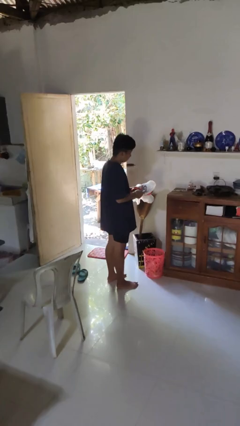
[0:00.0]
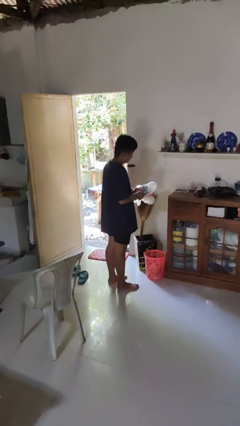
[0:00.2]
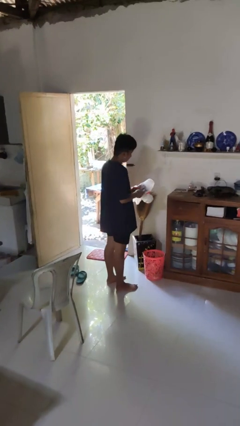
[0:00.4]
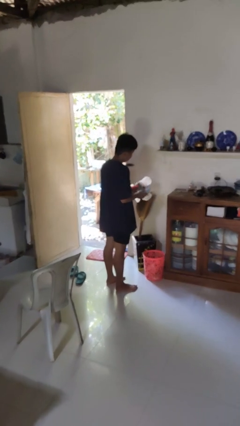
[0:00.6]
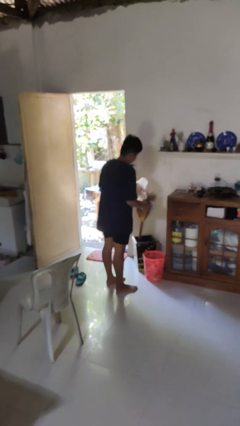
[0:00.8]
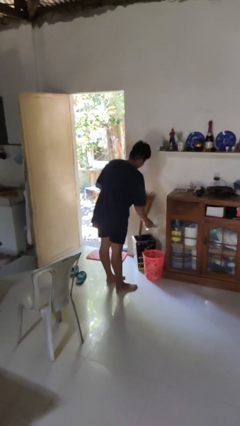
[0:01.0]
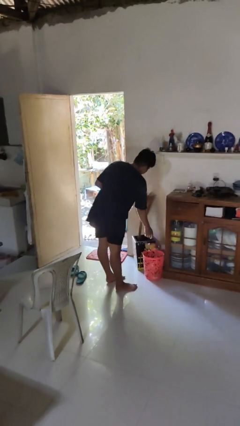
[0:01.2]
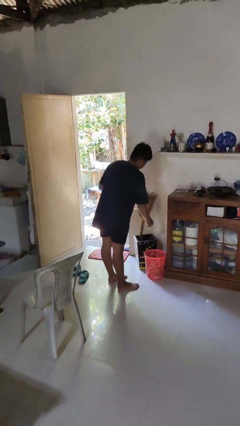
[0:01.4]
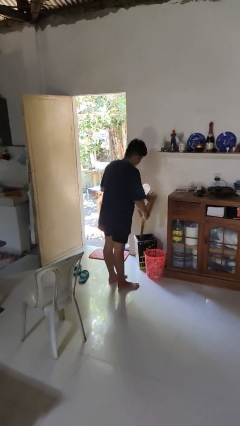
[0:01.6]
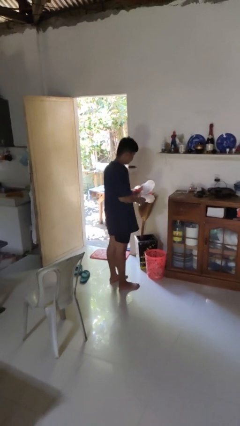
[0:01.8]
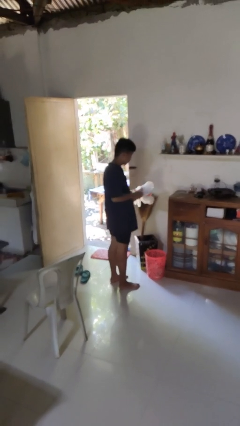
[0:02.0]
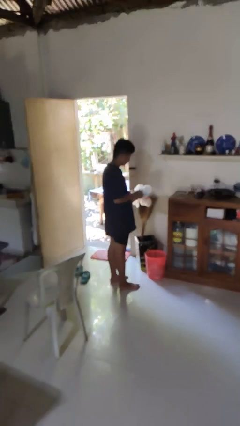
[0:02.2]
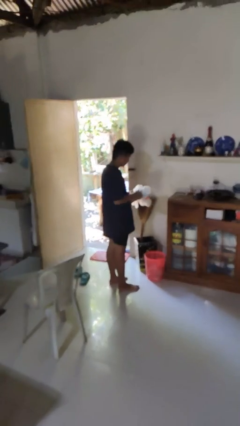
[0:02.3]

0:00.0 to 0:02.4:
person discards trash

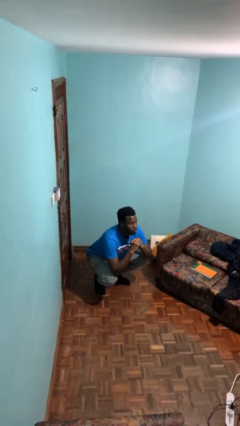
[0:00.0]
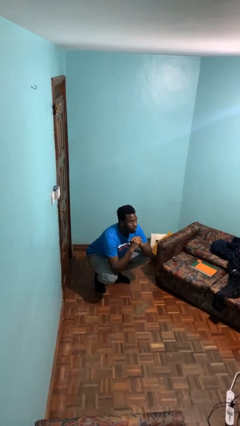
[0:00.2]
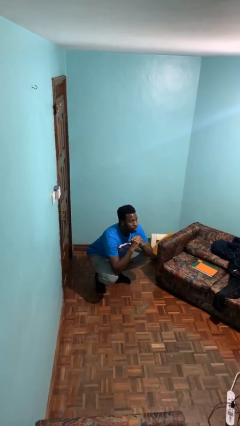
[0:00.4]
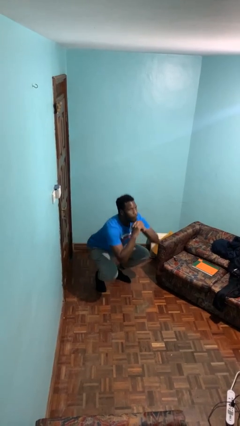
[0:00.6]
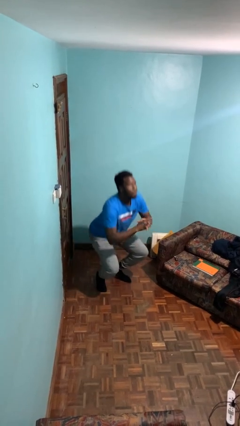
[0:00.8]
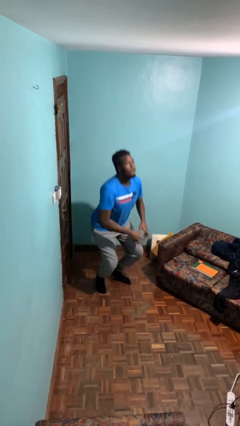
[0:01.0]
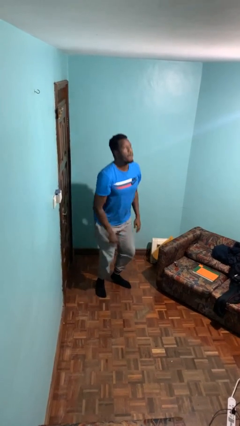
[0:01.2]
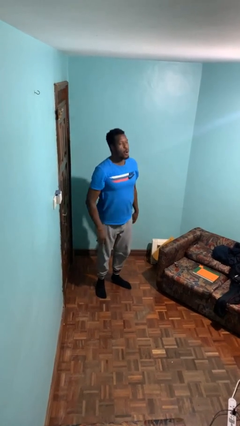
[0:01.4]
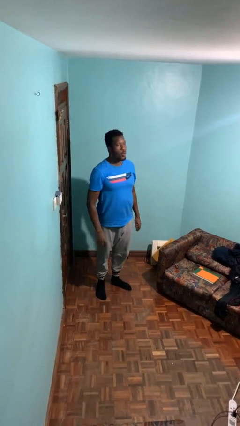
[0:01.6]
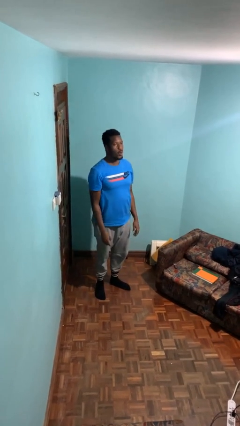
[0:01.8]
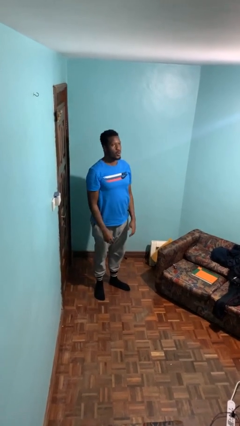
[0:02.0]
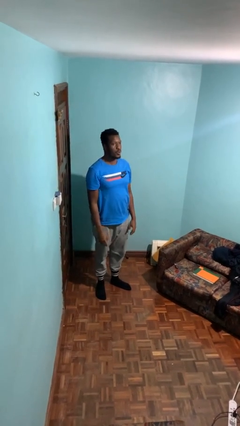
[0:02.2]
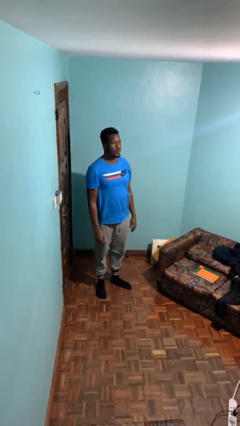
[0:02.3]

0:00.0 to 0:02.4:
person stands up

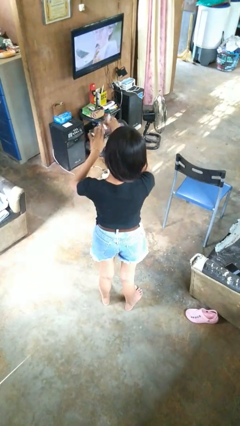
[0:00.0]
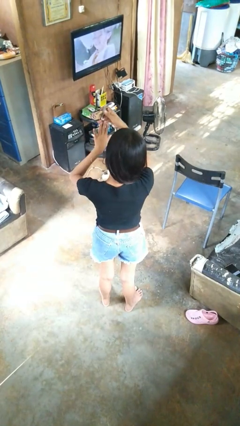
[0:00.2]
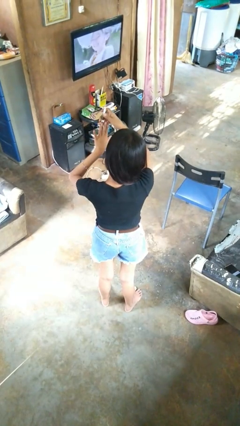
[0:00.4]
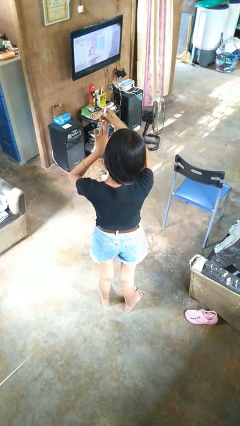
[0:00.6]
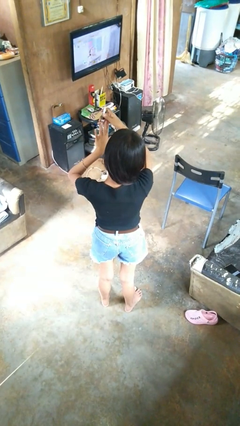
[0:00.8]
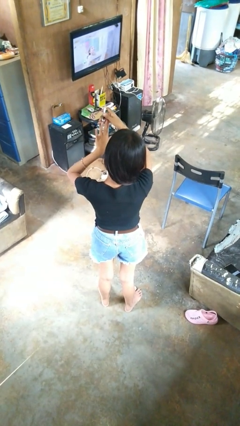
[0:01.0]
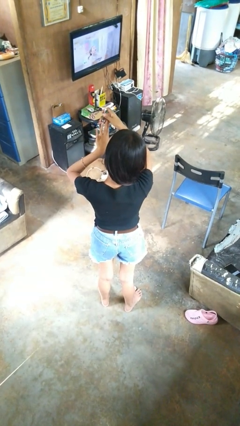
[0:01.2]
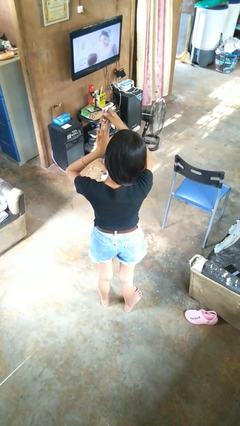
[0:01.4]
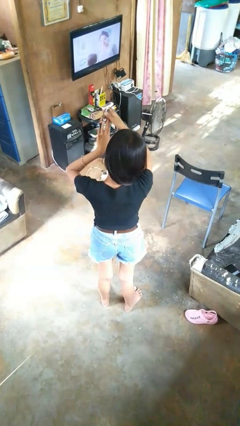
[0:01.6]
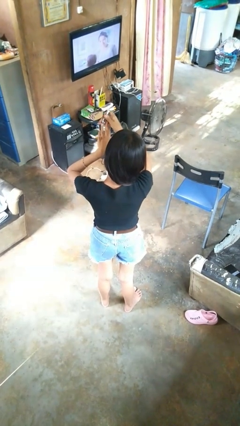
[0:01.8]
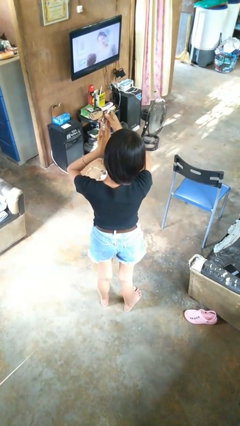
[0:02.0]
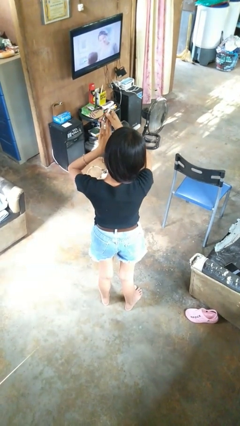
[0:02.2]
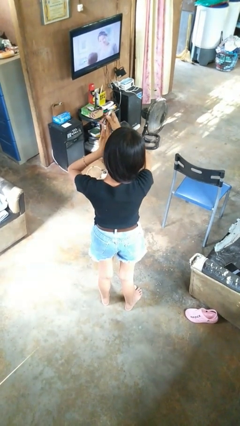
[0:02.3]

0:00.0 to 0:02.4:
person clips fingernails

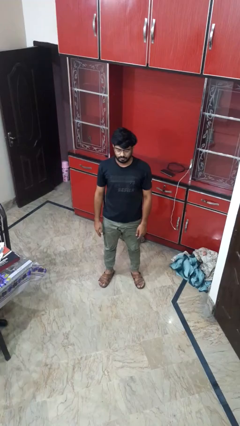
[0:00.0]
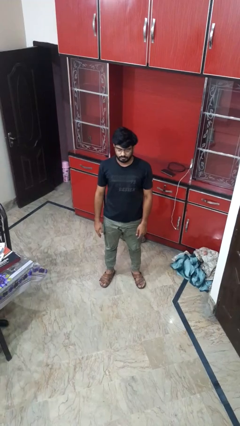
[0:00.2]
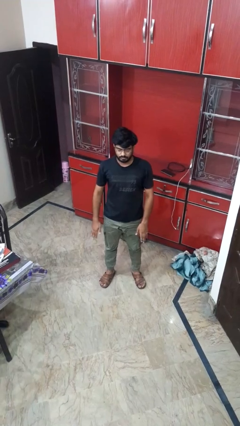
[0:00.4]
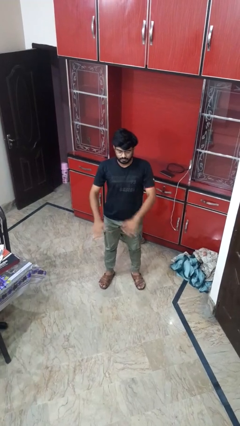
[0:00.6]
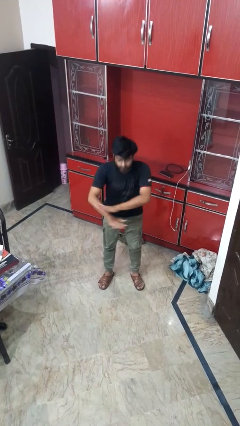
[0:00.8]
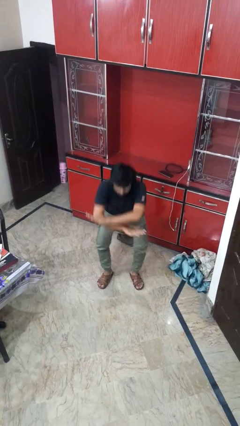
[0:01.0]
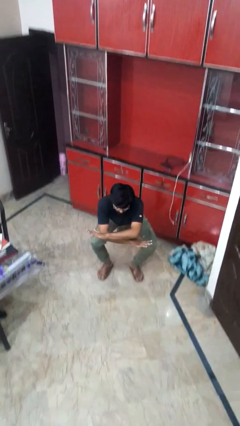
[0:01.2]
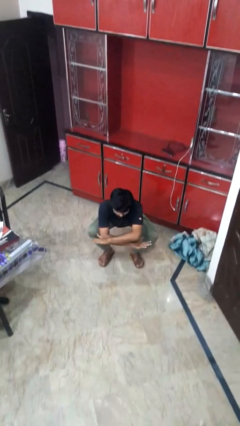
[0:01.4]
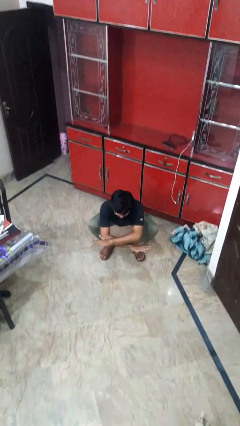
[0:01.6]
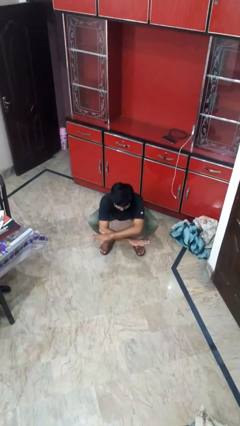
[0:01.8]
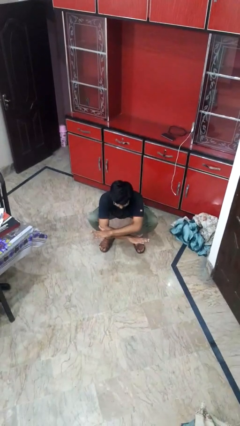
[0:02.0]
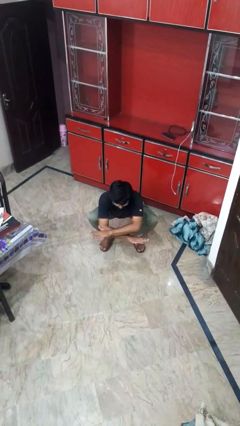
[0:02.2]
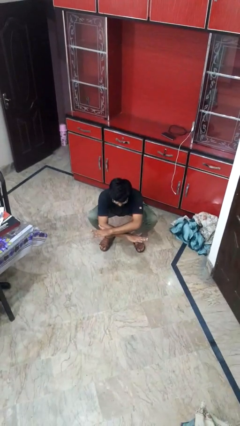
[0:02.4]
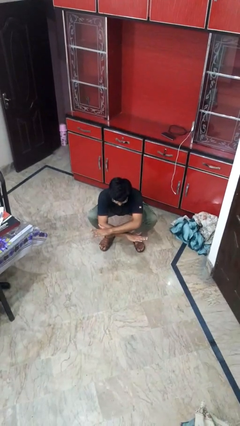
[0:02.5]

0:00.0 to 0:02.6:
person squats

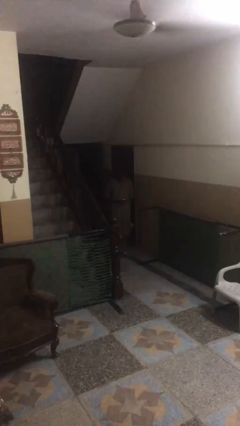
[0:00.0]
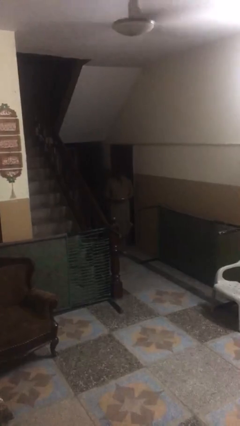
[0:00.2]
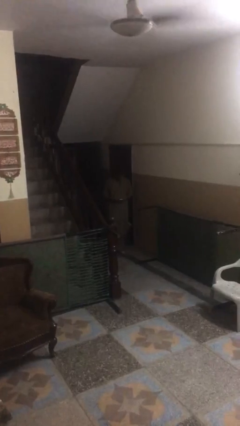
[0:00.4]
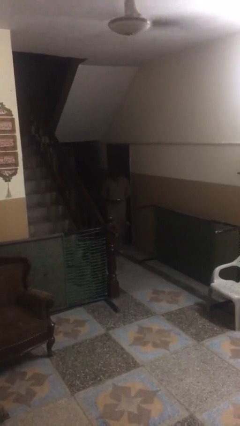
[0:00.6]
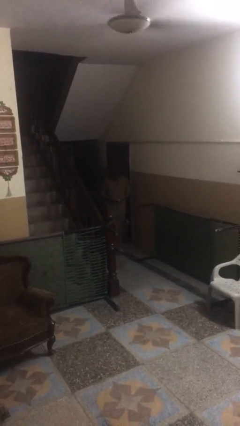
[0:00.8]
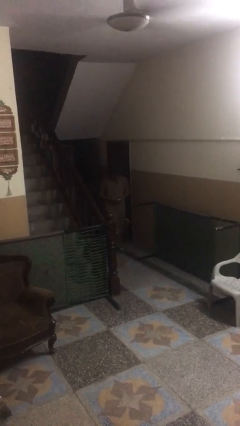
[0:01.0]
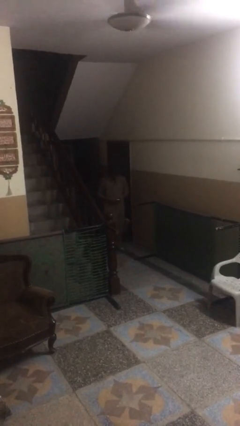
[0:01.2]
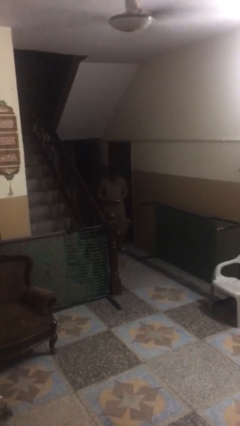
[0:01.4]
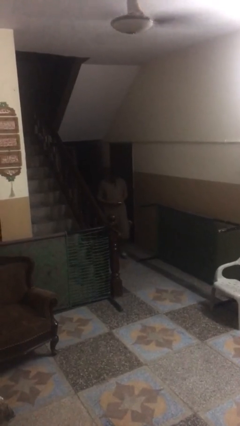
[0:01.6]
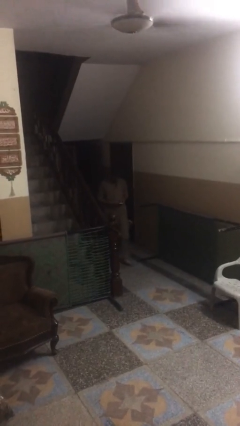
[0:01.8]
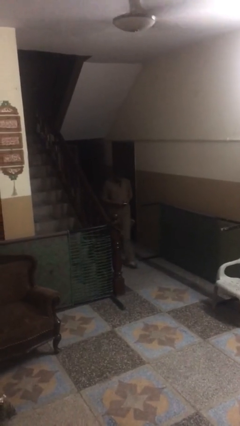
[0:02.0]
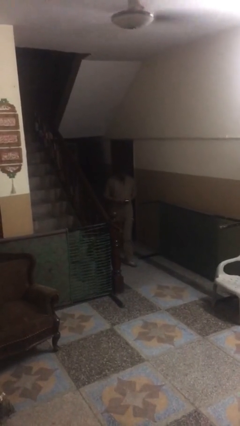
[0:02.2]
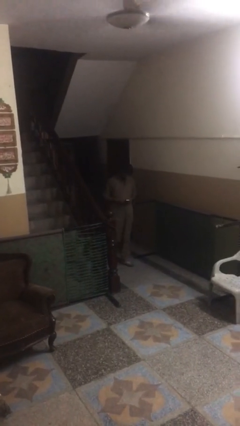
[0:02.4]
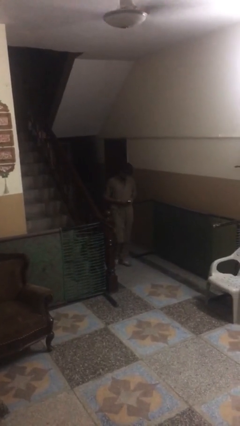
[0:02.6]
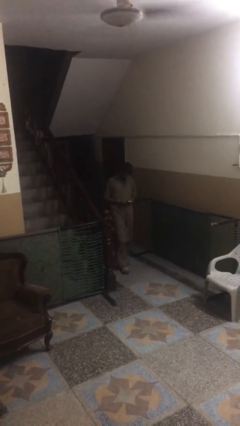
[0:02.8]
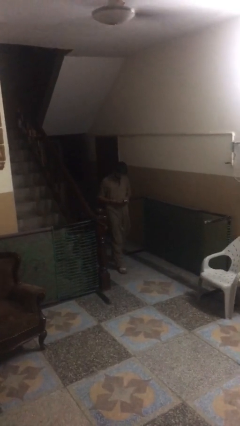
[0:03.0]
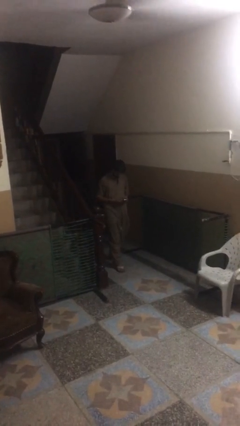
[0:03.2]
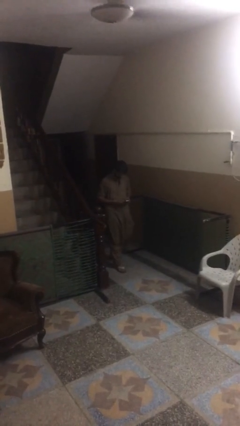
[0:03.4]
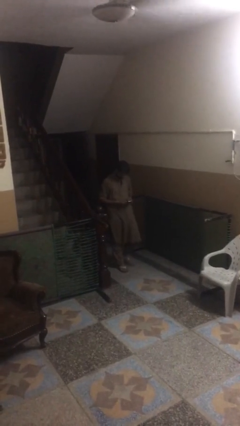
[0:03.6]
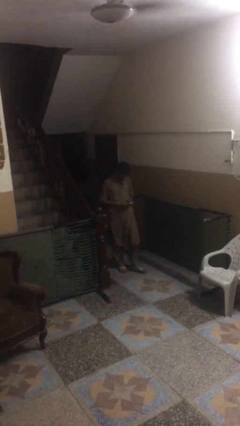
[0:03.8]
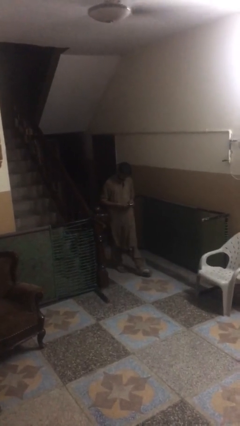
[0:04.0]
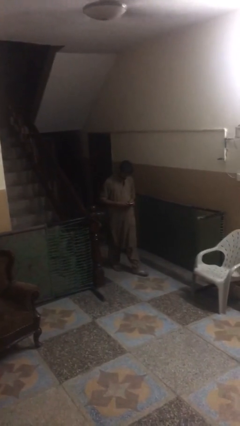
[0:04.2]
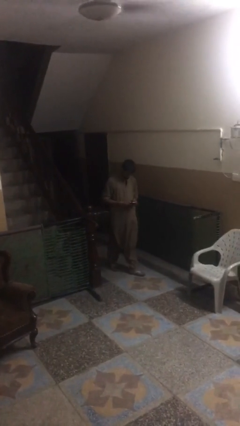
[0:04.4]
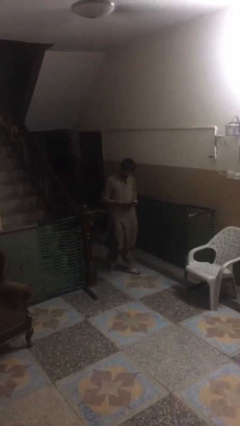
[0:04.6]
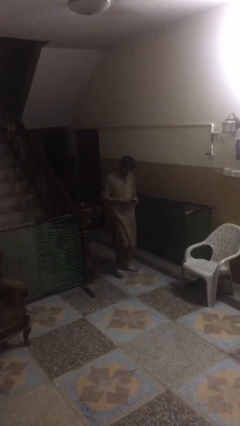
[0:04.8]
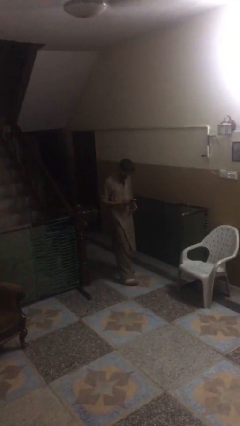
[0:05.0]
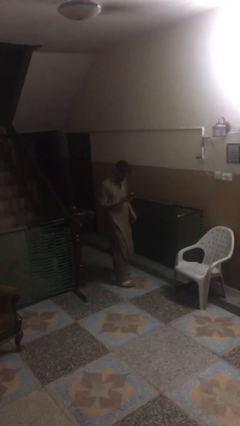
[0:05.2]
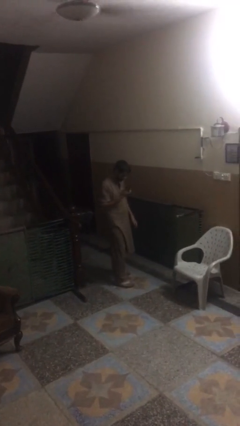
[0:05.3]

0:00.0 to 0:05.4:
person texts on phone

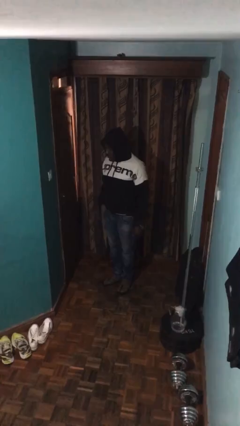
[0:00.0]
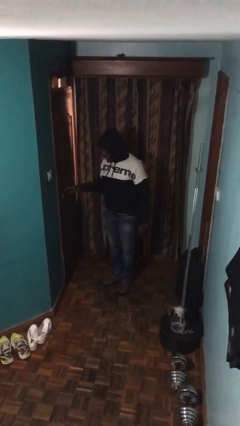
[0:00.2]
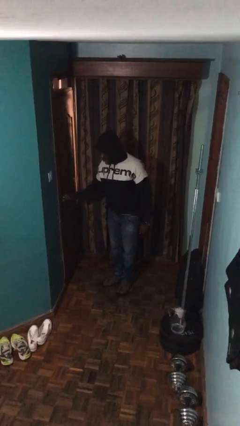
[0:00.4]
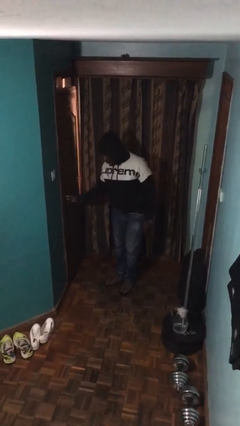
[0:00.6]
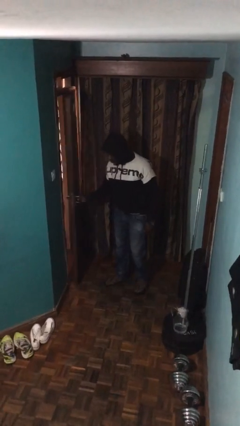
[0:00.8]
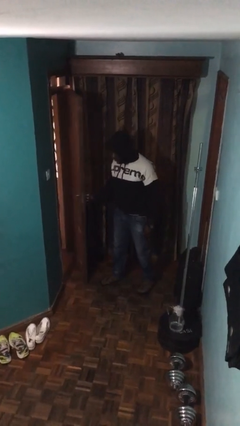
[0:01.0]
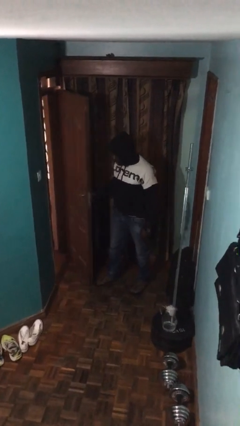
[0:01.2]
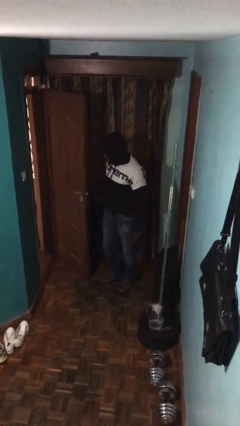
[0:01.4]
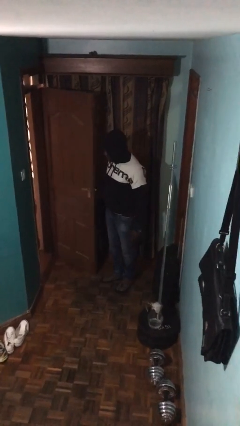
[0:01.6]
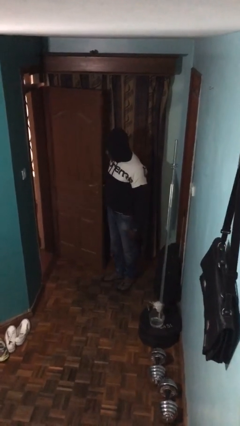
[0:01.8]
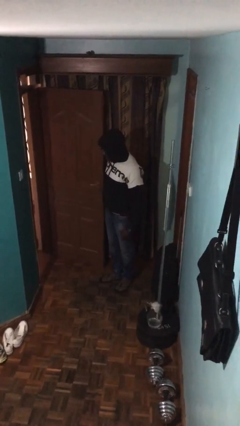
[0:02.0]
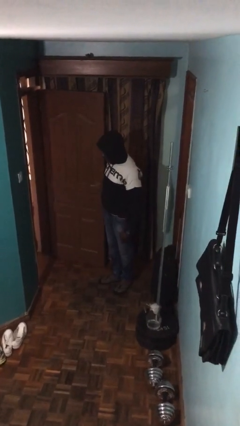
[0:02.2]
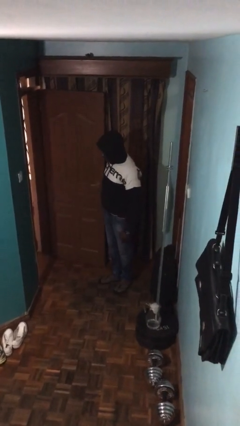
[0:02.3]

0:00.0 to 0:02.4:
person opens facility door
